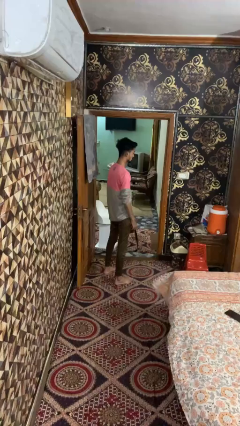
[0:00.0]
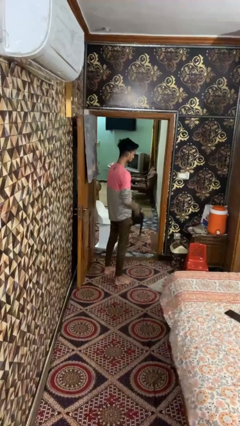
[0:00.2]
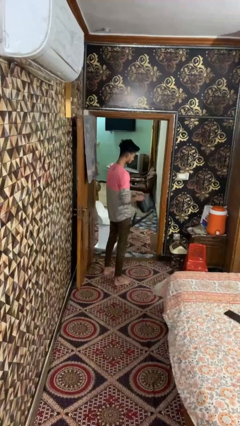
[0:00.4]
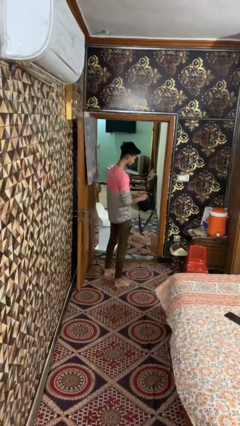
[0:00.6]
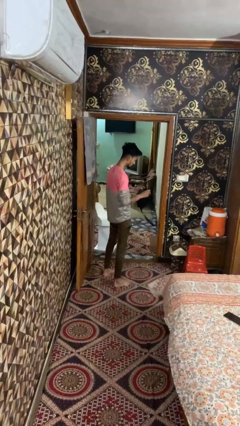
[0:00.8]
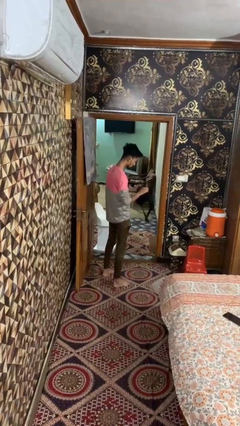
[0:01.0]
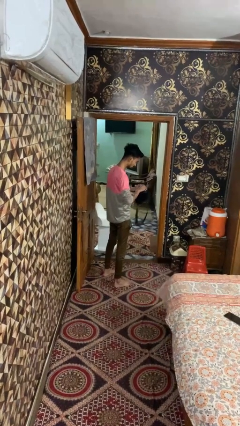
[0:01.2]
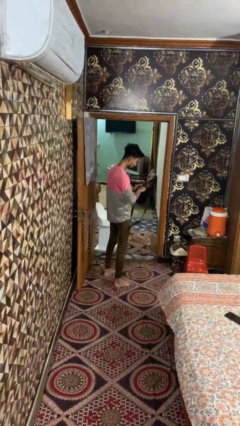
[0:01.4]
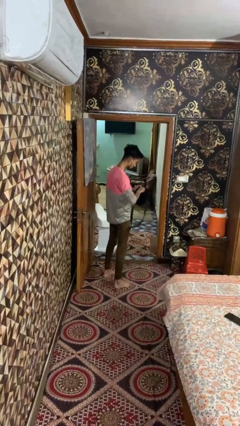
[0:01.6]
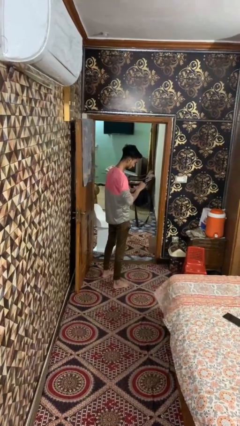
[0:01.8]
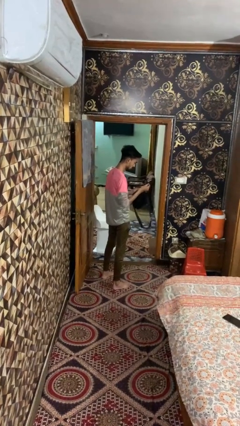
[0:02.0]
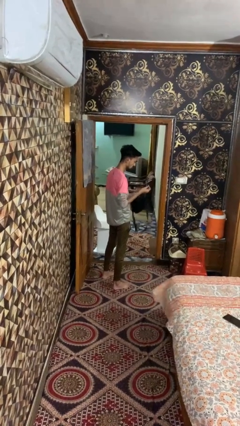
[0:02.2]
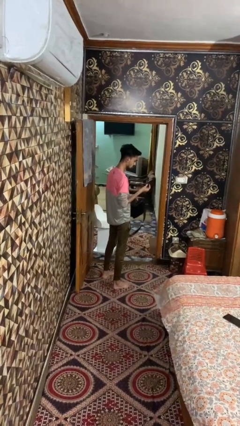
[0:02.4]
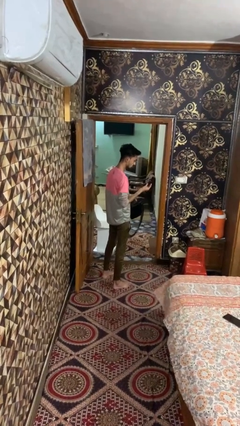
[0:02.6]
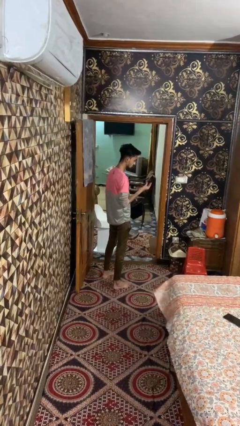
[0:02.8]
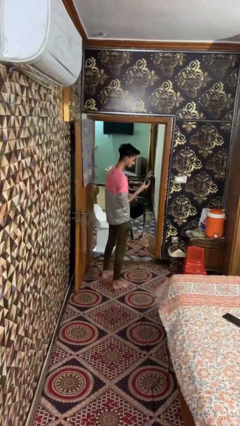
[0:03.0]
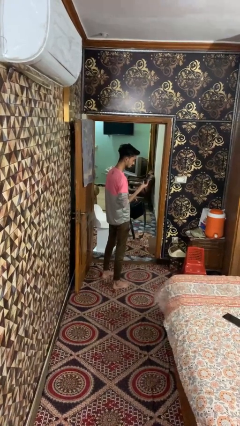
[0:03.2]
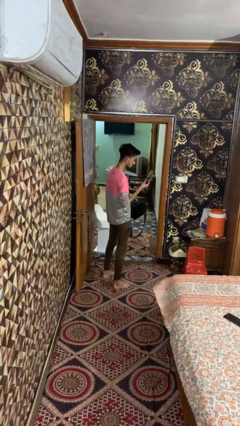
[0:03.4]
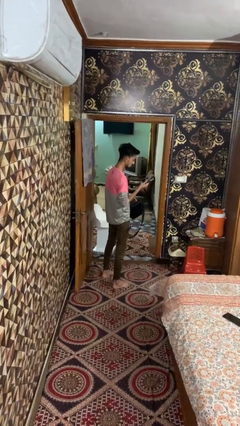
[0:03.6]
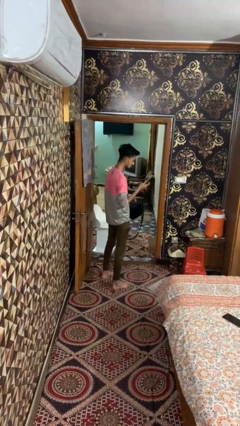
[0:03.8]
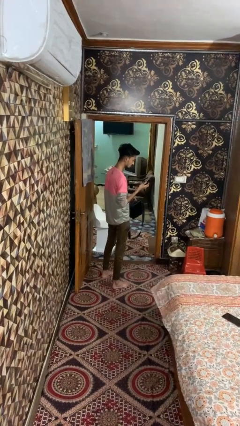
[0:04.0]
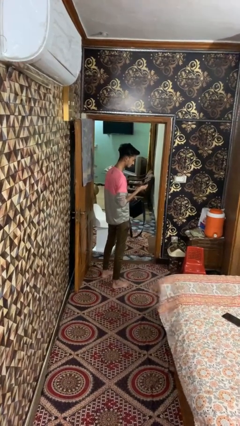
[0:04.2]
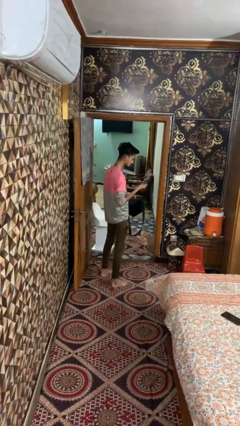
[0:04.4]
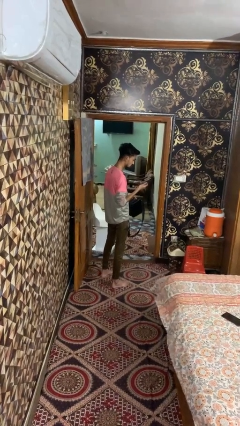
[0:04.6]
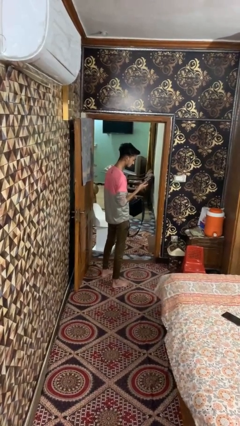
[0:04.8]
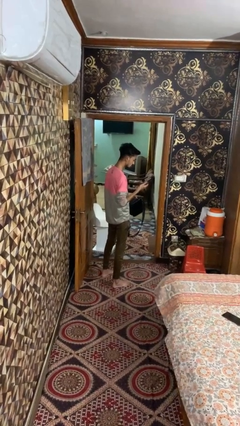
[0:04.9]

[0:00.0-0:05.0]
person takes object from bag

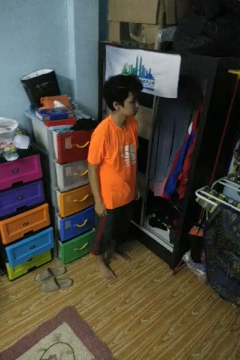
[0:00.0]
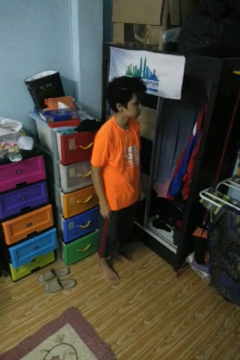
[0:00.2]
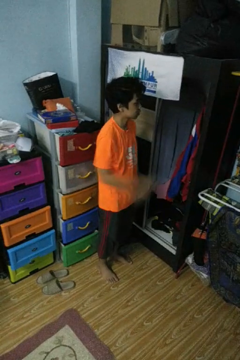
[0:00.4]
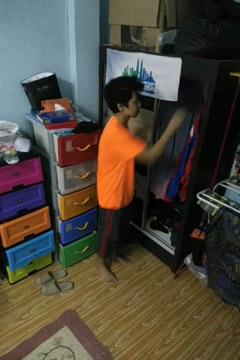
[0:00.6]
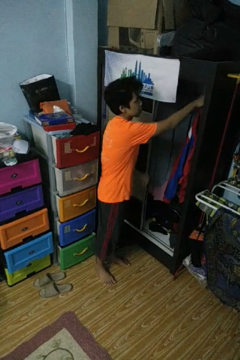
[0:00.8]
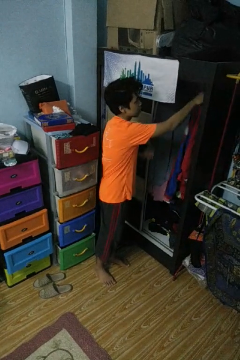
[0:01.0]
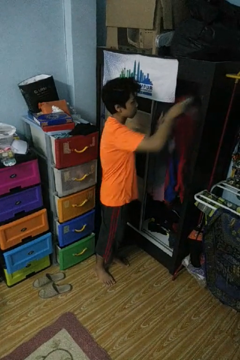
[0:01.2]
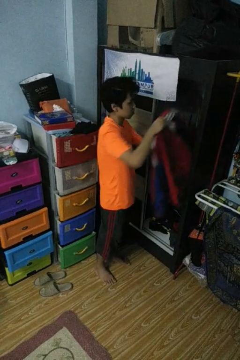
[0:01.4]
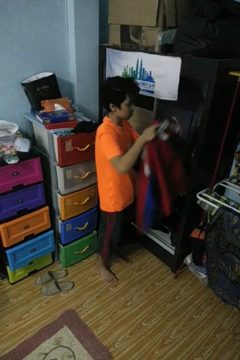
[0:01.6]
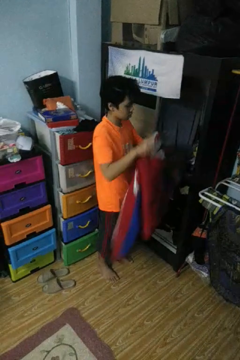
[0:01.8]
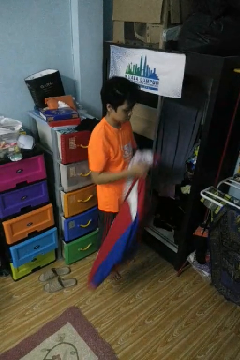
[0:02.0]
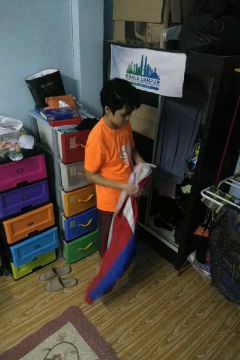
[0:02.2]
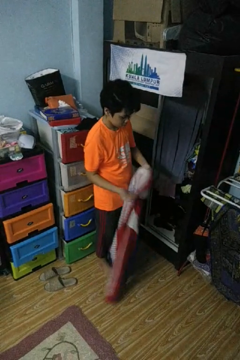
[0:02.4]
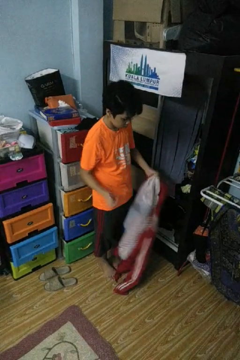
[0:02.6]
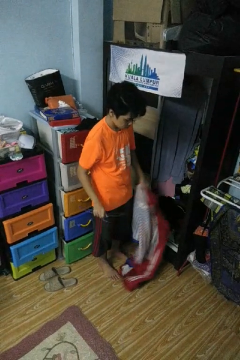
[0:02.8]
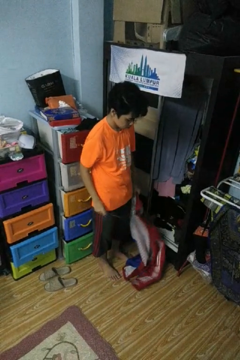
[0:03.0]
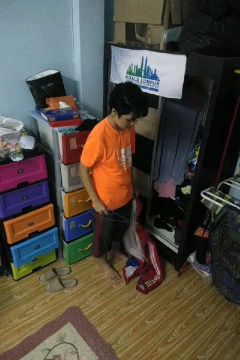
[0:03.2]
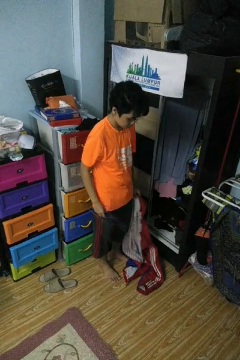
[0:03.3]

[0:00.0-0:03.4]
person takes clothes from closet

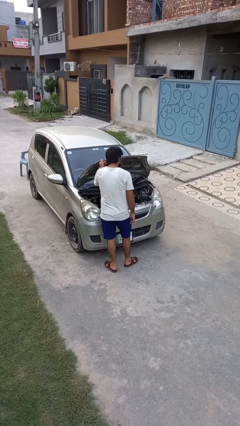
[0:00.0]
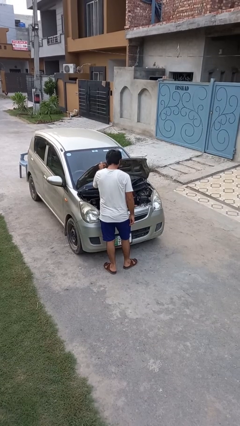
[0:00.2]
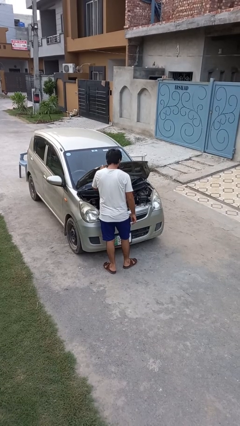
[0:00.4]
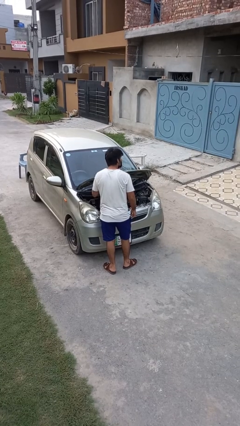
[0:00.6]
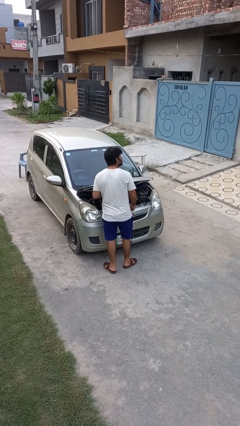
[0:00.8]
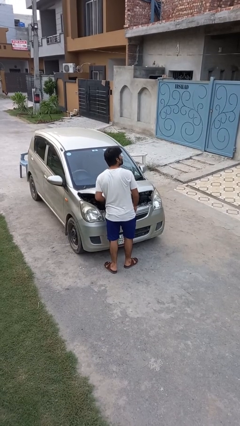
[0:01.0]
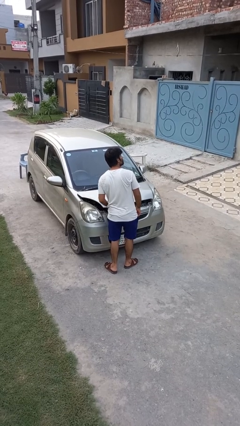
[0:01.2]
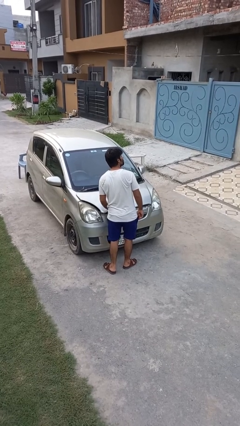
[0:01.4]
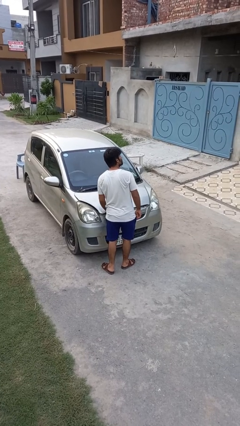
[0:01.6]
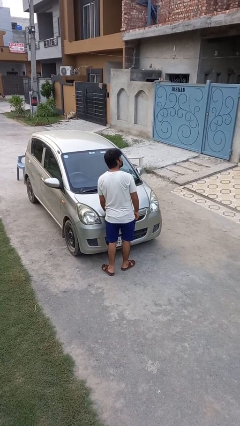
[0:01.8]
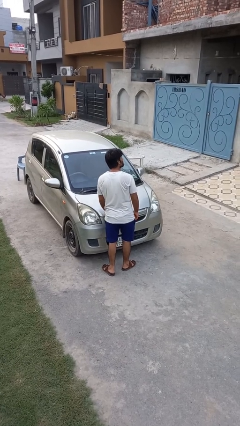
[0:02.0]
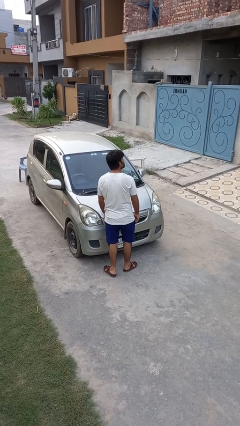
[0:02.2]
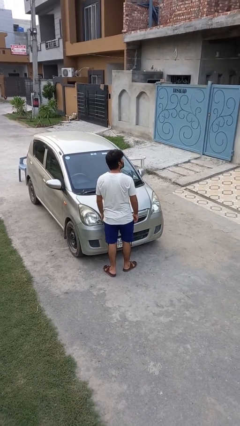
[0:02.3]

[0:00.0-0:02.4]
person closes car hood

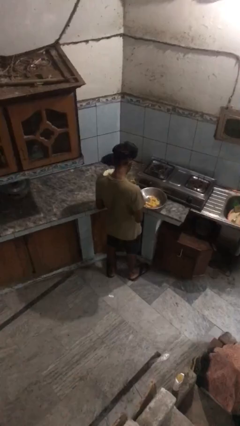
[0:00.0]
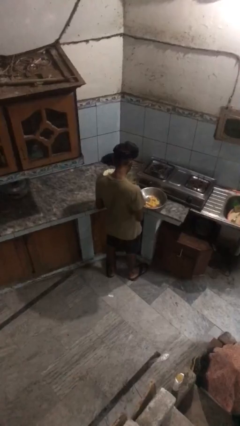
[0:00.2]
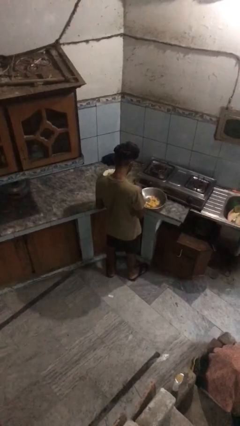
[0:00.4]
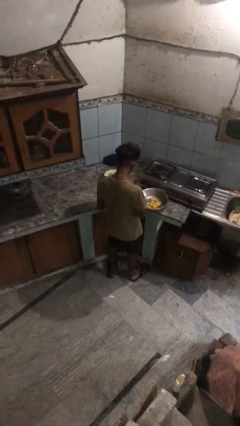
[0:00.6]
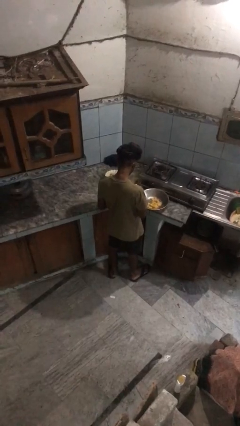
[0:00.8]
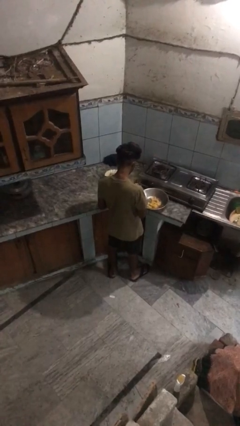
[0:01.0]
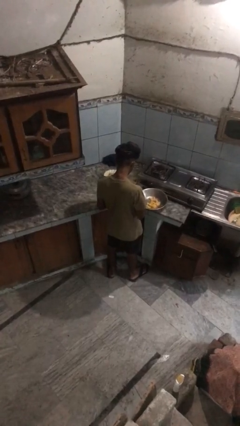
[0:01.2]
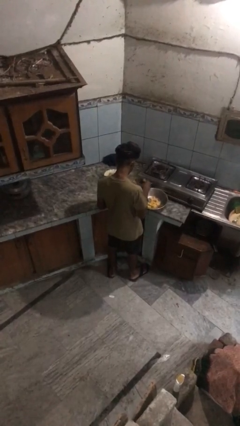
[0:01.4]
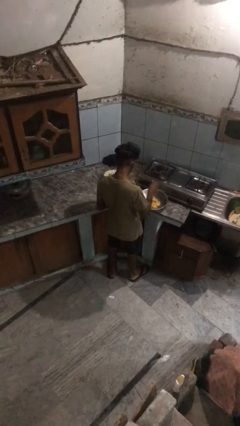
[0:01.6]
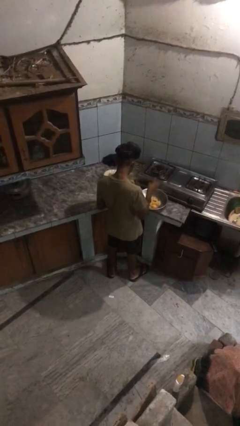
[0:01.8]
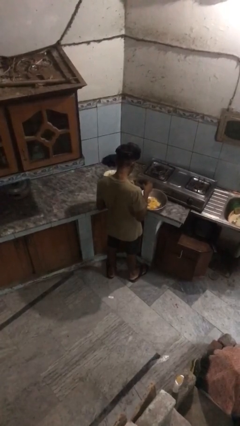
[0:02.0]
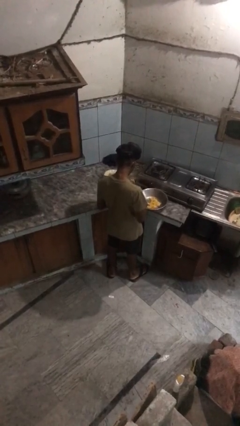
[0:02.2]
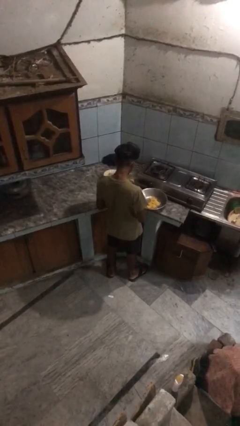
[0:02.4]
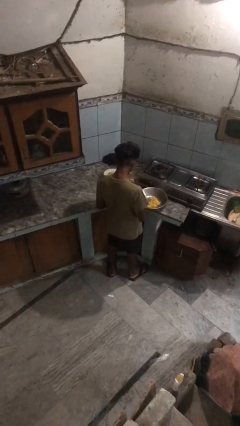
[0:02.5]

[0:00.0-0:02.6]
person pours into bowl

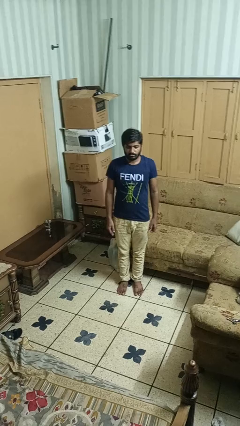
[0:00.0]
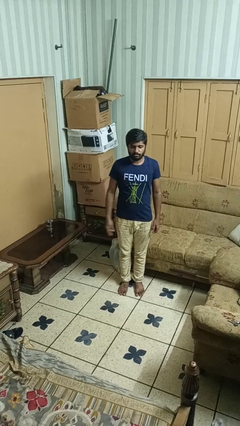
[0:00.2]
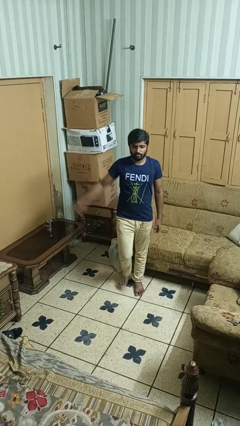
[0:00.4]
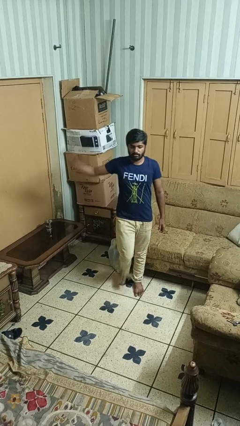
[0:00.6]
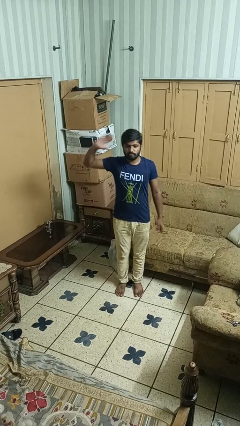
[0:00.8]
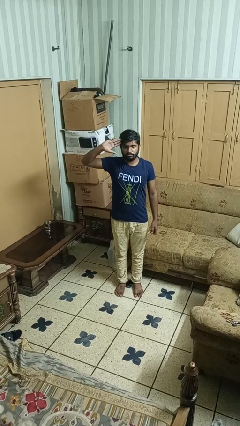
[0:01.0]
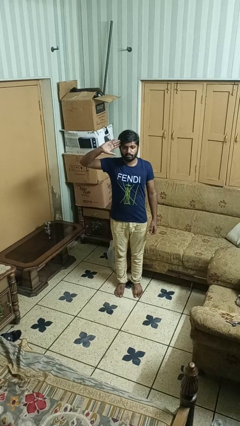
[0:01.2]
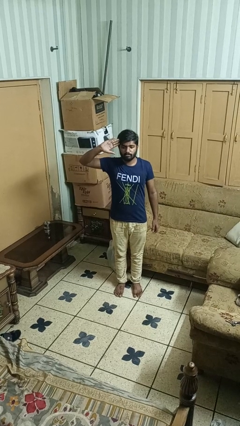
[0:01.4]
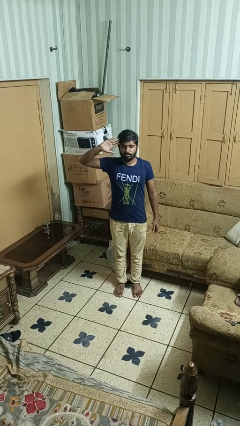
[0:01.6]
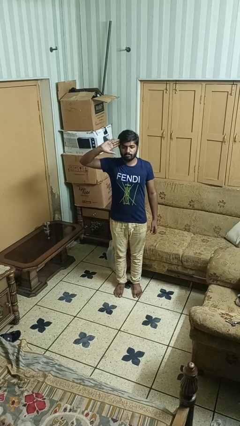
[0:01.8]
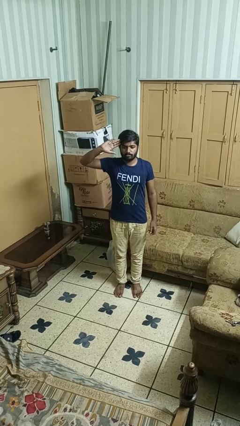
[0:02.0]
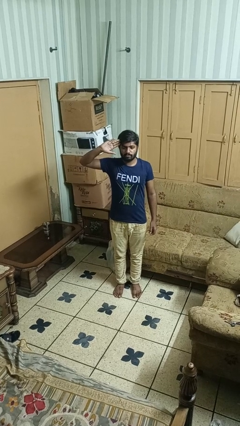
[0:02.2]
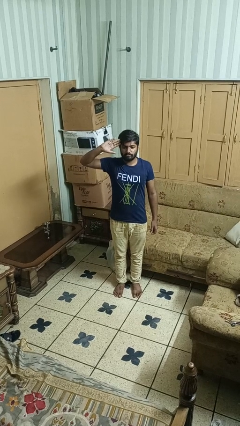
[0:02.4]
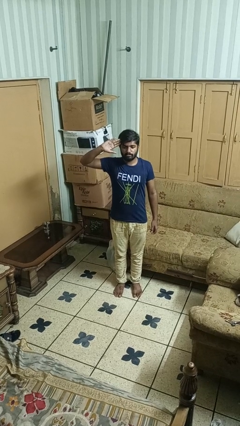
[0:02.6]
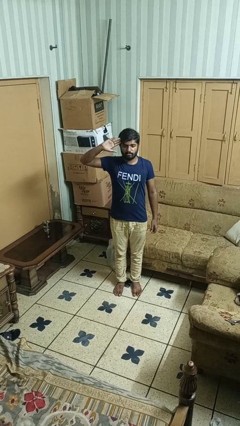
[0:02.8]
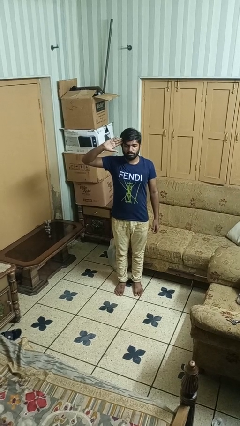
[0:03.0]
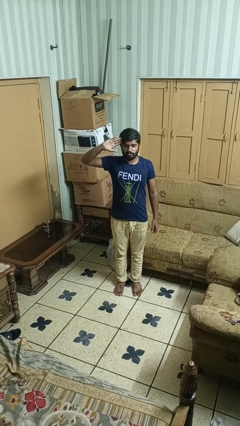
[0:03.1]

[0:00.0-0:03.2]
person salutes

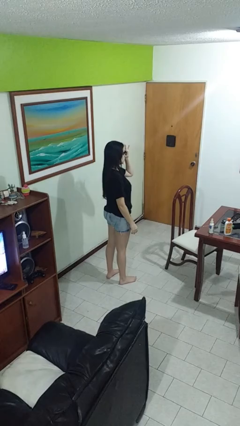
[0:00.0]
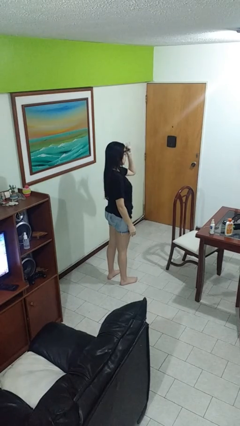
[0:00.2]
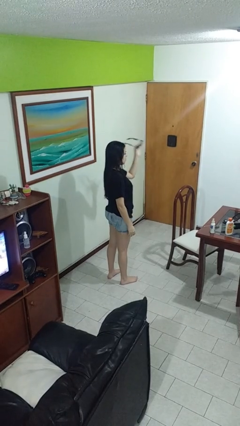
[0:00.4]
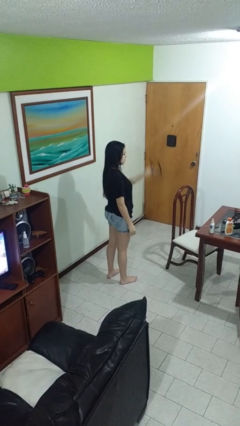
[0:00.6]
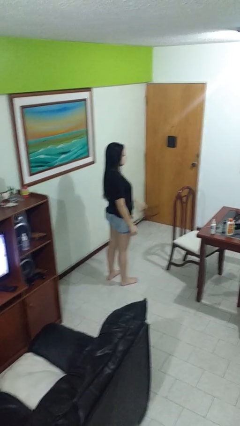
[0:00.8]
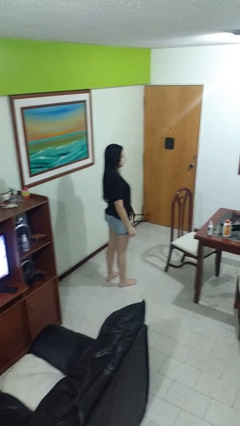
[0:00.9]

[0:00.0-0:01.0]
person takes off sunglasses

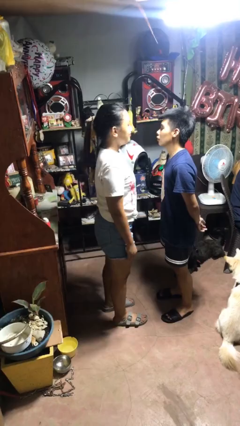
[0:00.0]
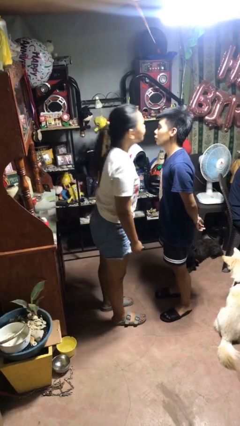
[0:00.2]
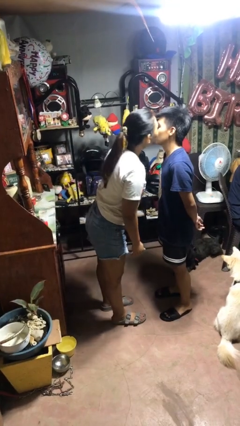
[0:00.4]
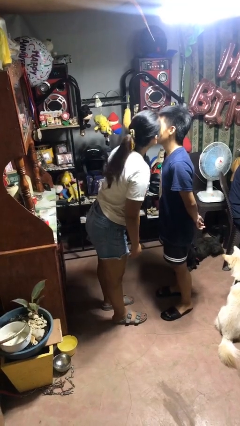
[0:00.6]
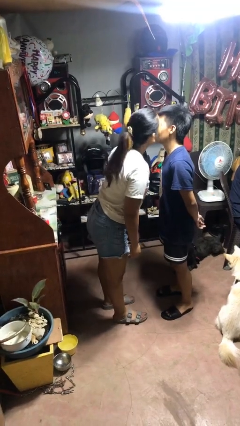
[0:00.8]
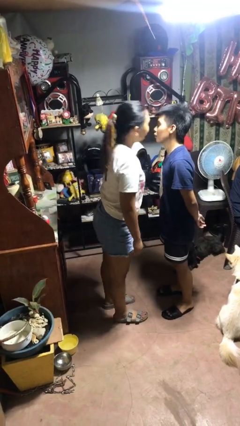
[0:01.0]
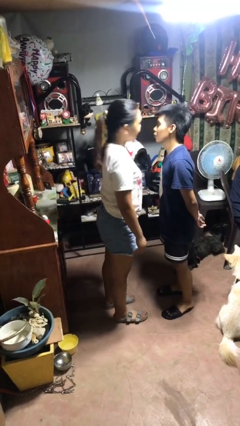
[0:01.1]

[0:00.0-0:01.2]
person kisses cheek of person
